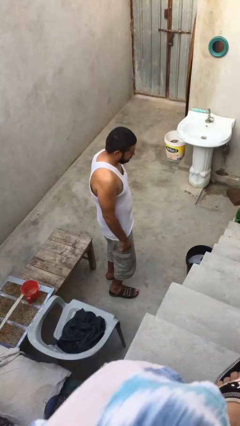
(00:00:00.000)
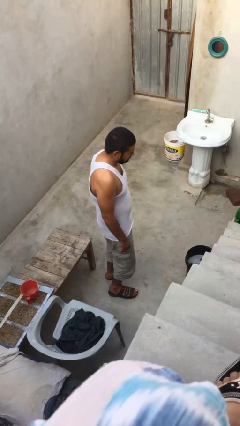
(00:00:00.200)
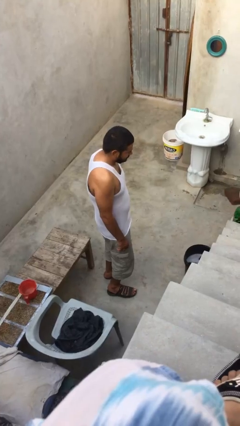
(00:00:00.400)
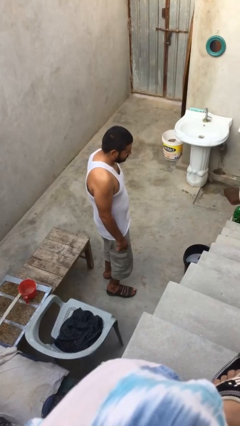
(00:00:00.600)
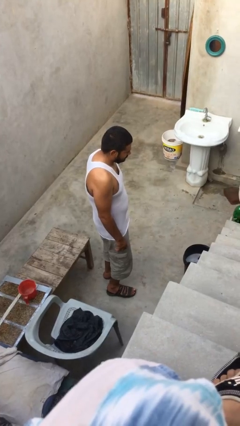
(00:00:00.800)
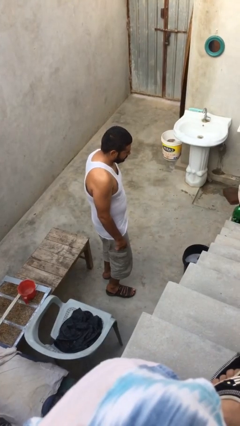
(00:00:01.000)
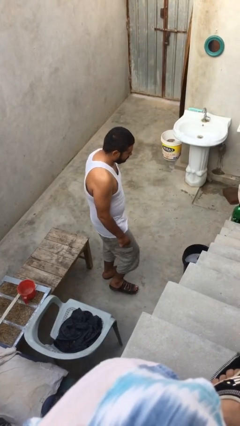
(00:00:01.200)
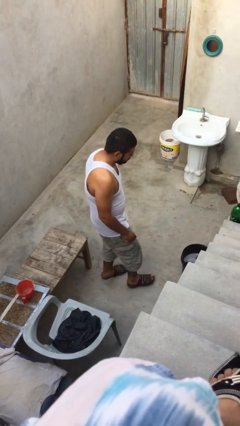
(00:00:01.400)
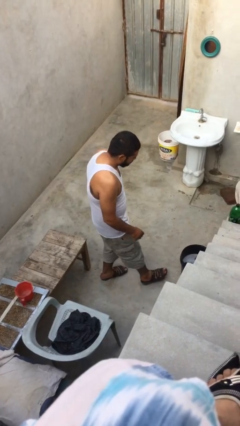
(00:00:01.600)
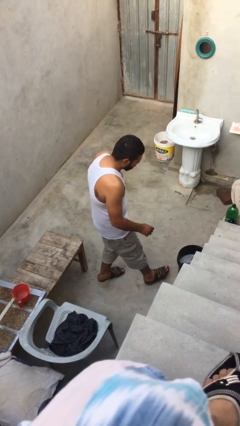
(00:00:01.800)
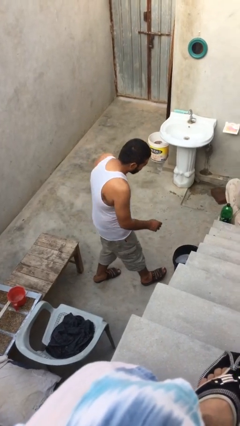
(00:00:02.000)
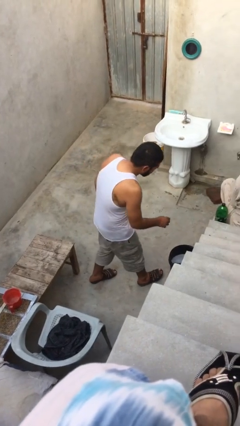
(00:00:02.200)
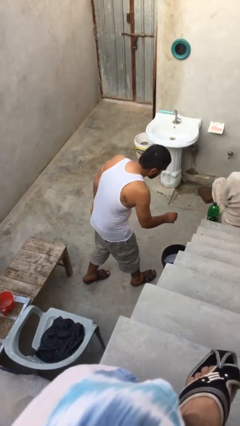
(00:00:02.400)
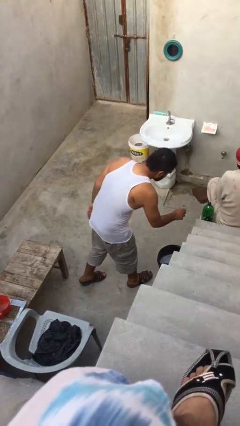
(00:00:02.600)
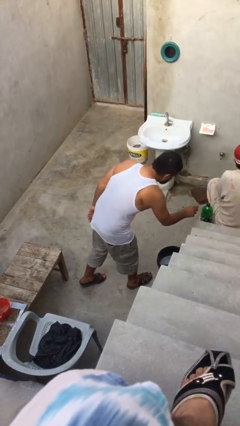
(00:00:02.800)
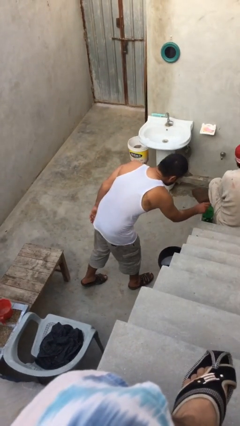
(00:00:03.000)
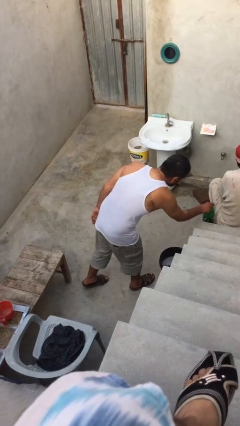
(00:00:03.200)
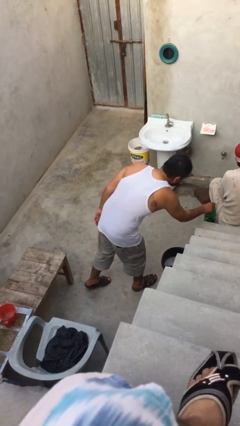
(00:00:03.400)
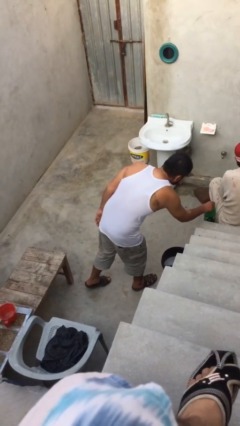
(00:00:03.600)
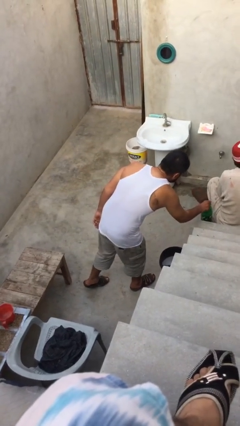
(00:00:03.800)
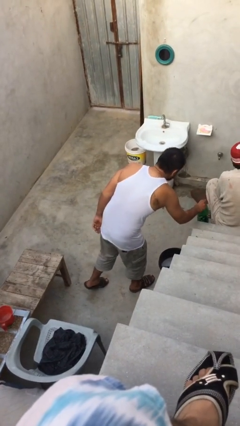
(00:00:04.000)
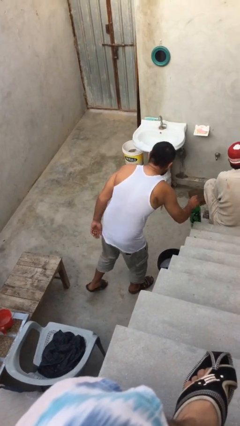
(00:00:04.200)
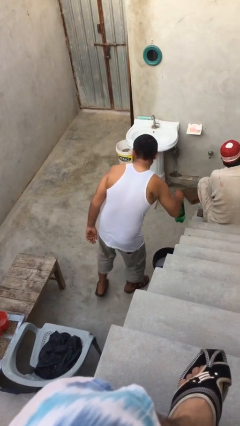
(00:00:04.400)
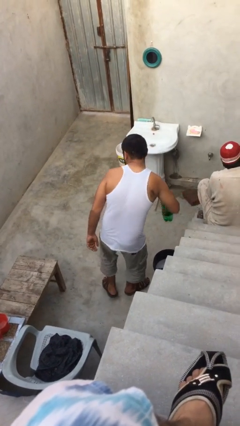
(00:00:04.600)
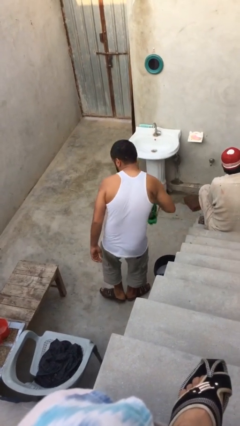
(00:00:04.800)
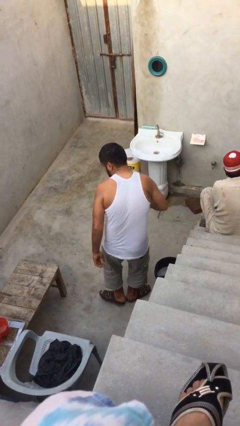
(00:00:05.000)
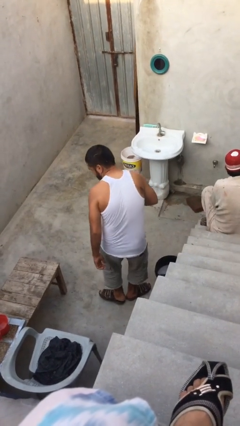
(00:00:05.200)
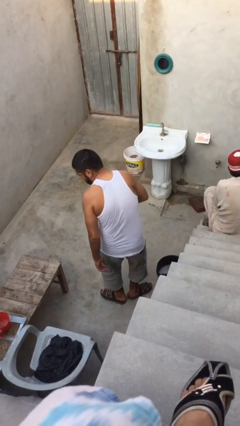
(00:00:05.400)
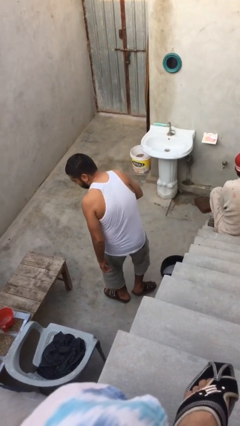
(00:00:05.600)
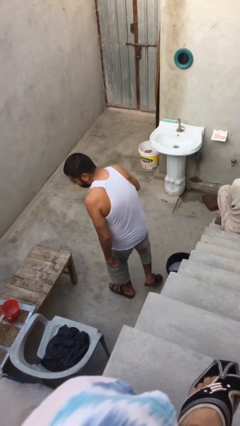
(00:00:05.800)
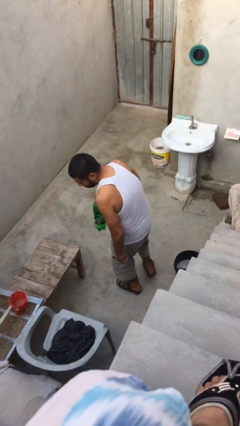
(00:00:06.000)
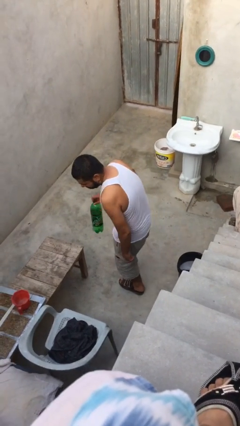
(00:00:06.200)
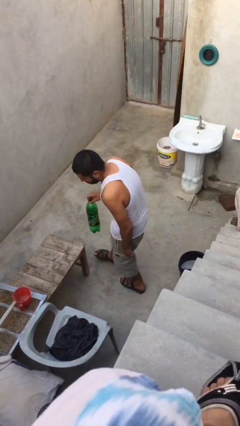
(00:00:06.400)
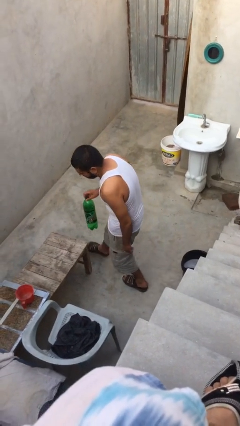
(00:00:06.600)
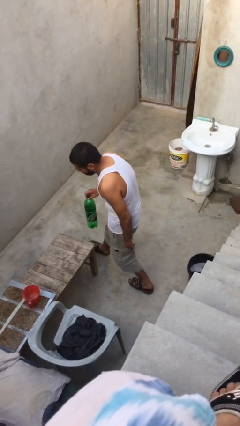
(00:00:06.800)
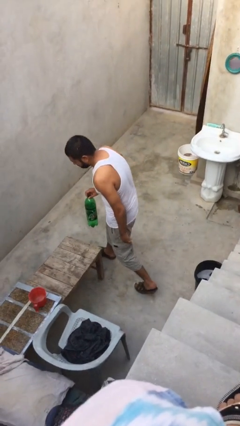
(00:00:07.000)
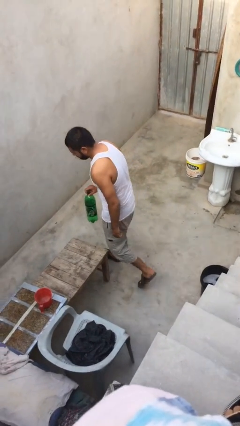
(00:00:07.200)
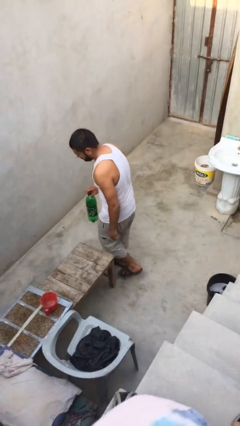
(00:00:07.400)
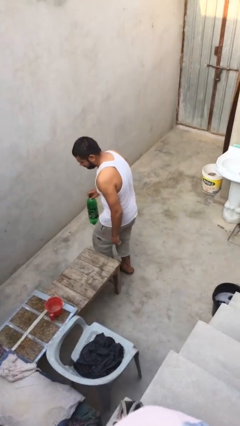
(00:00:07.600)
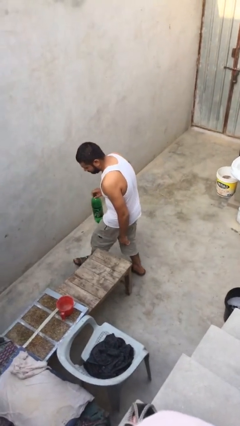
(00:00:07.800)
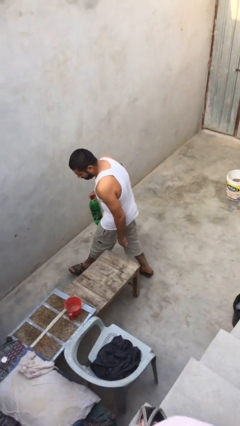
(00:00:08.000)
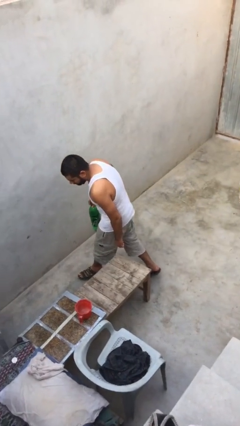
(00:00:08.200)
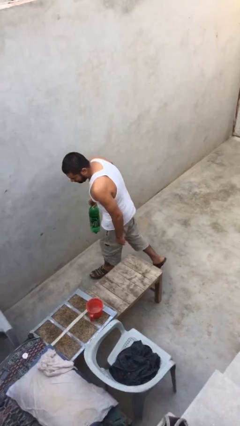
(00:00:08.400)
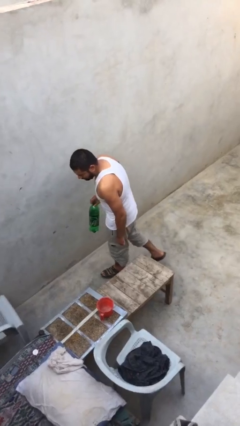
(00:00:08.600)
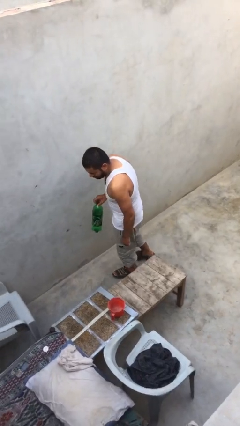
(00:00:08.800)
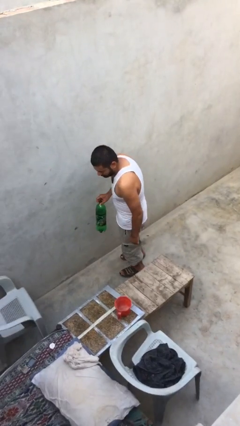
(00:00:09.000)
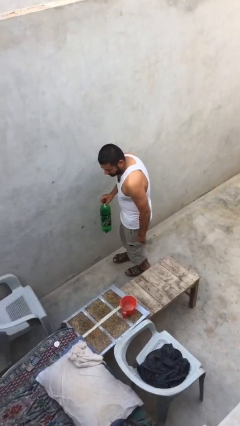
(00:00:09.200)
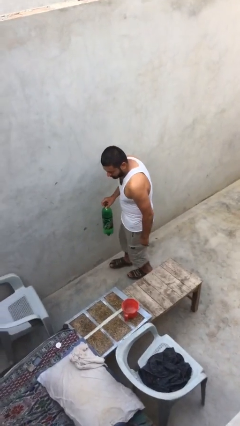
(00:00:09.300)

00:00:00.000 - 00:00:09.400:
person steals object from person

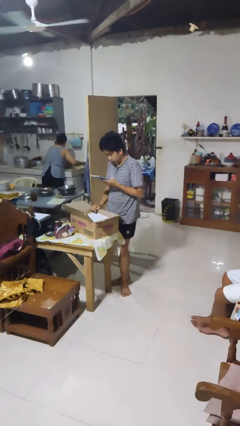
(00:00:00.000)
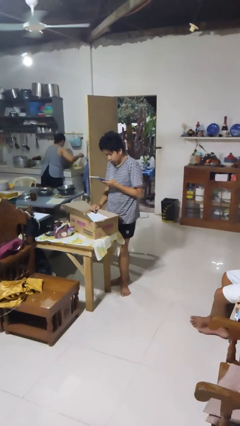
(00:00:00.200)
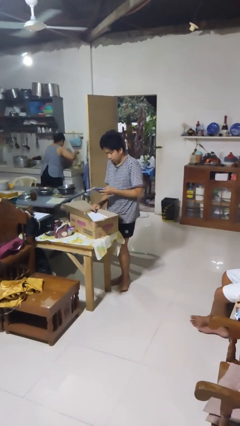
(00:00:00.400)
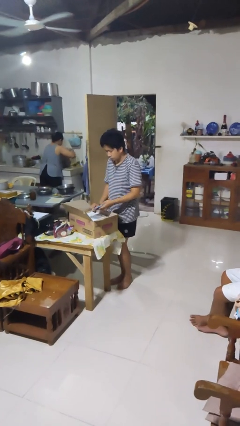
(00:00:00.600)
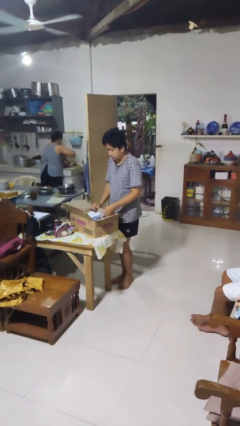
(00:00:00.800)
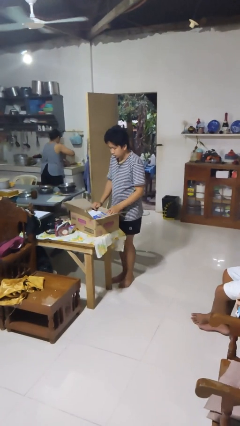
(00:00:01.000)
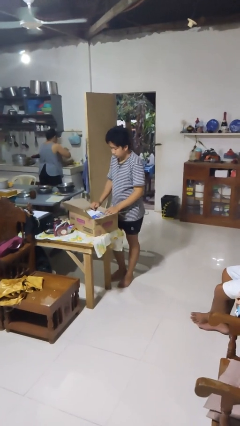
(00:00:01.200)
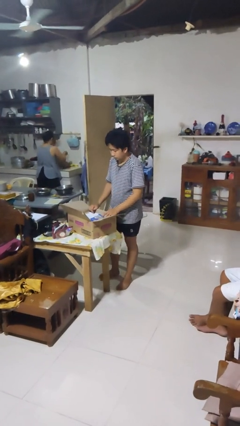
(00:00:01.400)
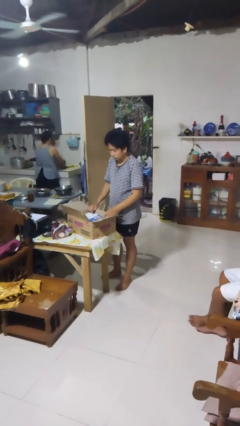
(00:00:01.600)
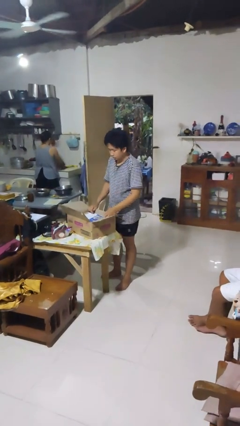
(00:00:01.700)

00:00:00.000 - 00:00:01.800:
person puts object into box

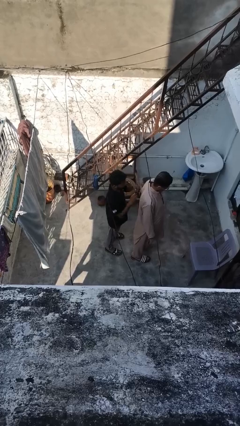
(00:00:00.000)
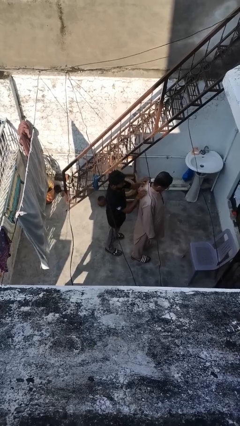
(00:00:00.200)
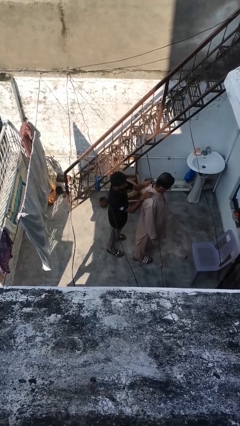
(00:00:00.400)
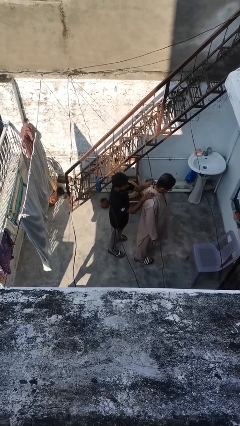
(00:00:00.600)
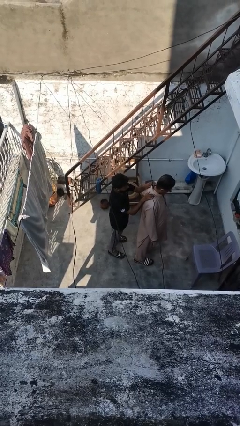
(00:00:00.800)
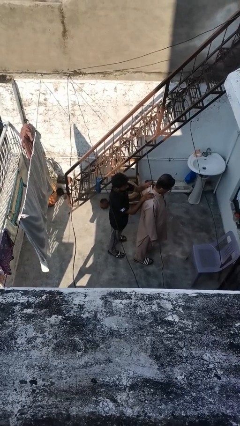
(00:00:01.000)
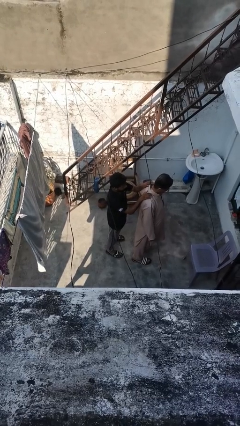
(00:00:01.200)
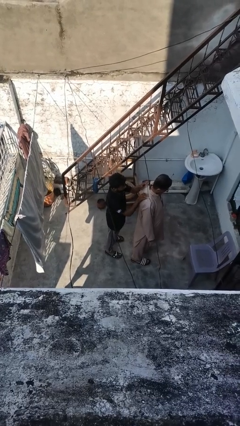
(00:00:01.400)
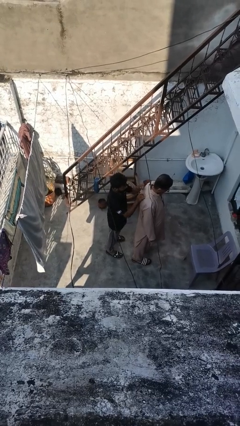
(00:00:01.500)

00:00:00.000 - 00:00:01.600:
person pounds shoulders of person

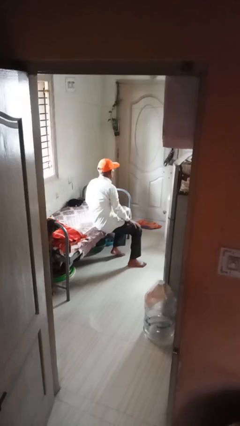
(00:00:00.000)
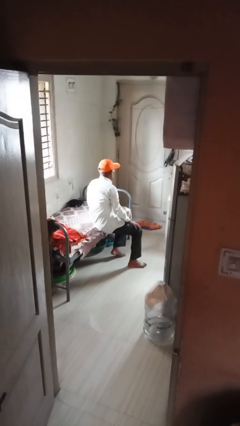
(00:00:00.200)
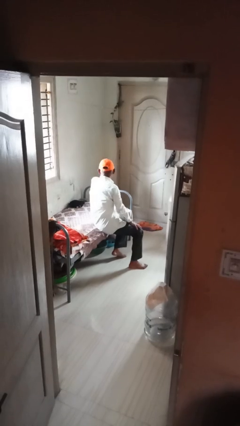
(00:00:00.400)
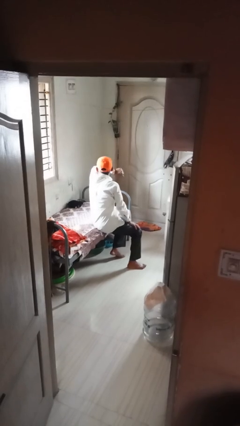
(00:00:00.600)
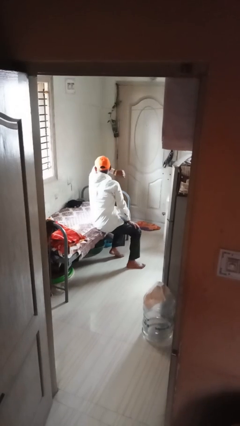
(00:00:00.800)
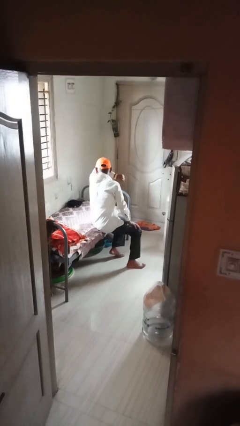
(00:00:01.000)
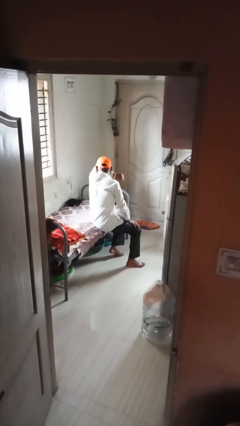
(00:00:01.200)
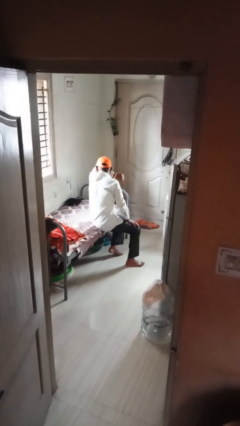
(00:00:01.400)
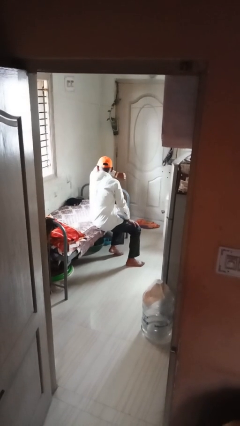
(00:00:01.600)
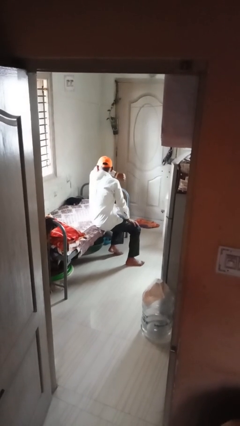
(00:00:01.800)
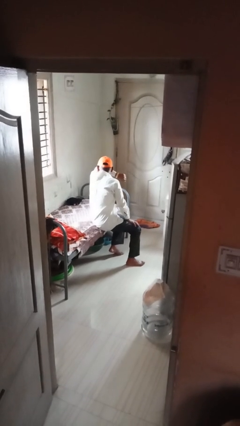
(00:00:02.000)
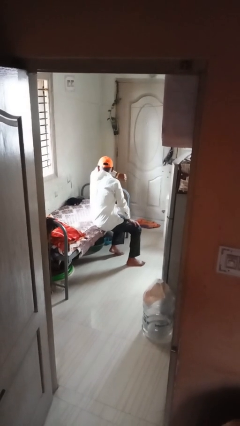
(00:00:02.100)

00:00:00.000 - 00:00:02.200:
person sneezes into arm

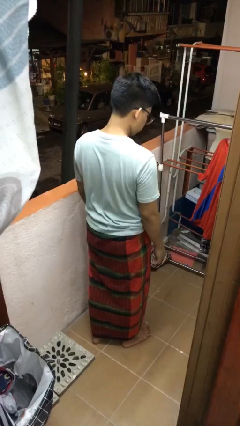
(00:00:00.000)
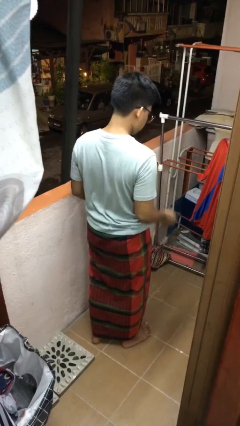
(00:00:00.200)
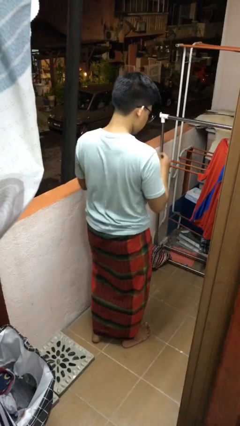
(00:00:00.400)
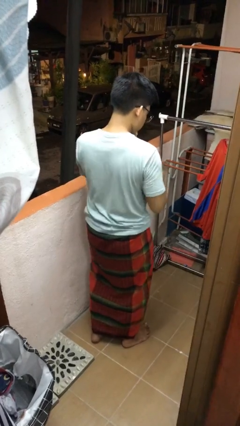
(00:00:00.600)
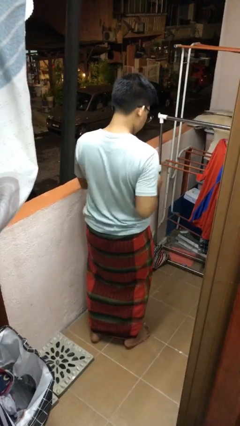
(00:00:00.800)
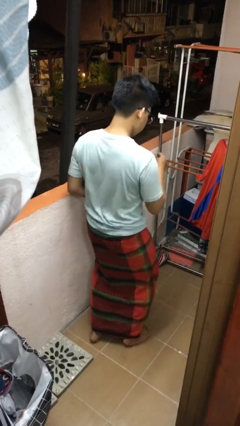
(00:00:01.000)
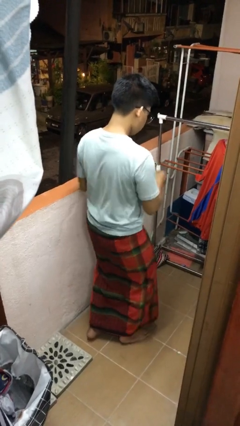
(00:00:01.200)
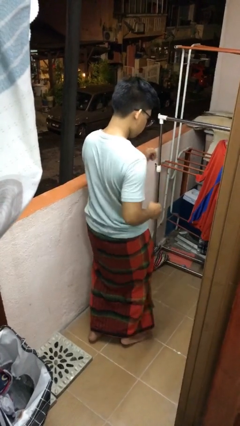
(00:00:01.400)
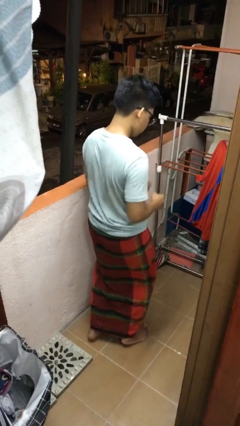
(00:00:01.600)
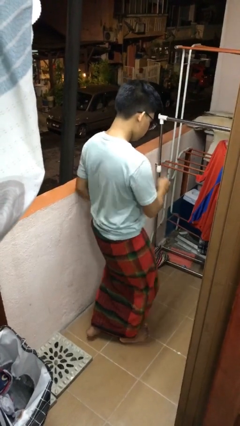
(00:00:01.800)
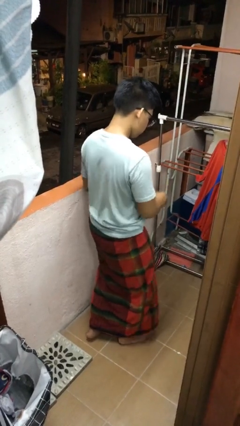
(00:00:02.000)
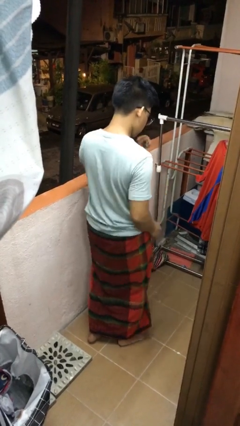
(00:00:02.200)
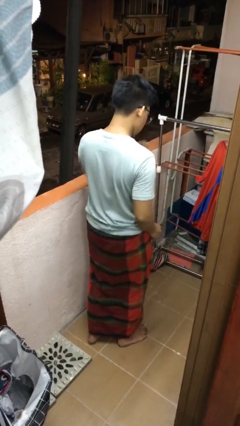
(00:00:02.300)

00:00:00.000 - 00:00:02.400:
person dances in place
